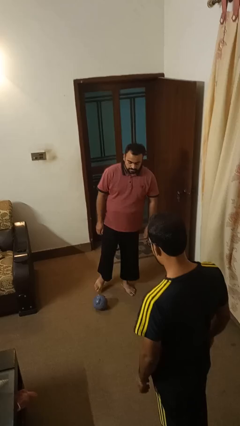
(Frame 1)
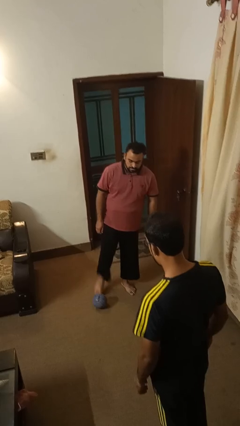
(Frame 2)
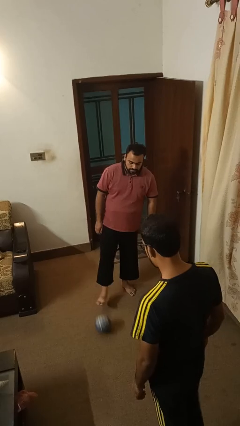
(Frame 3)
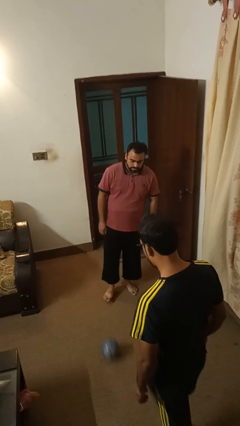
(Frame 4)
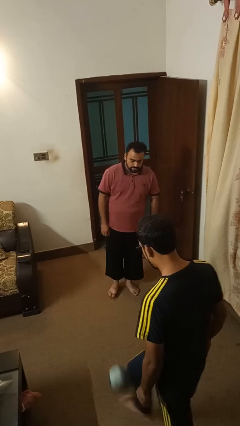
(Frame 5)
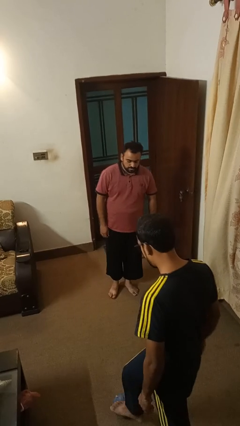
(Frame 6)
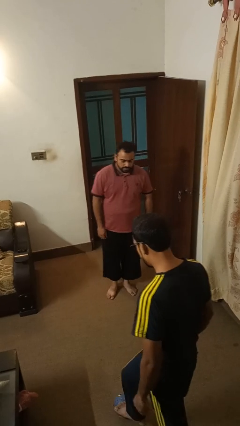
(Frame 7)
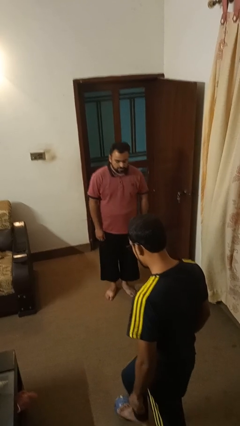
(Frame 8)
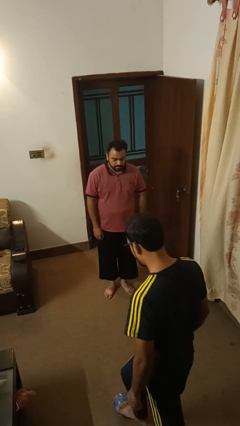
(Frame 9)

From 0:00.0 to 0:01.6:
person kicks object to person

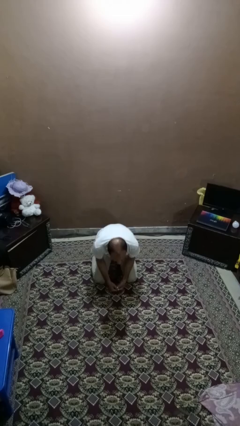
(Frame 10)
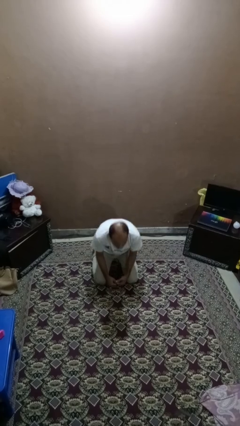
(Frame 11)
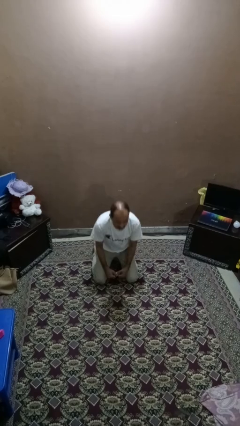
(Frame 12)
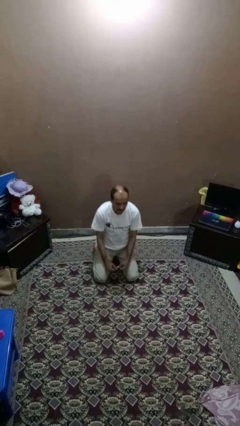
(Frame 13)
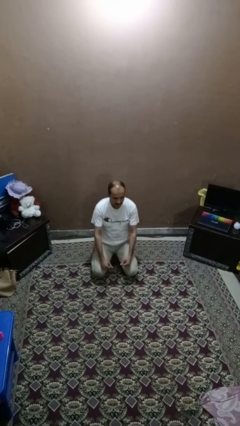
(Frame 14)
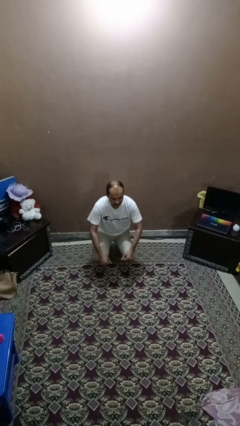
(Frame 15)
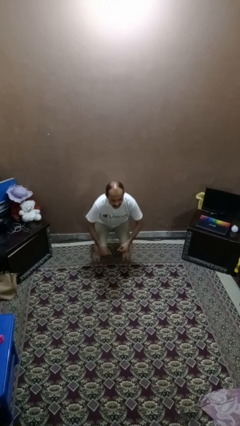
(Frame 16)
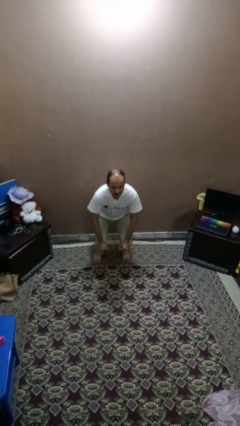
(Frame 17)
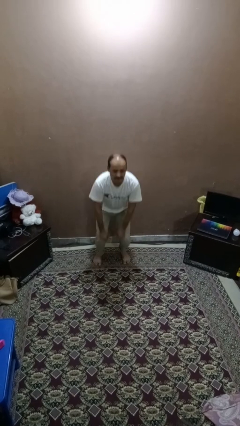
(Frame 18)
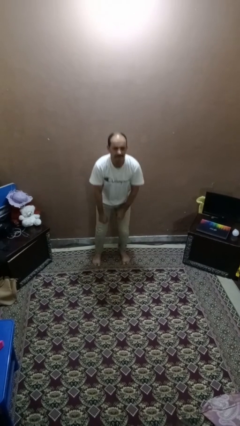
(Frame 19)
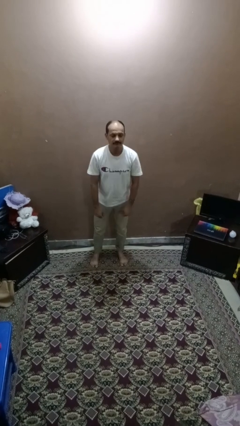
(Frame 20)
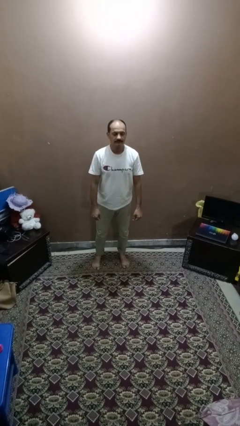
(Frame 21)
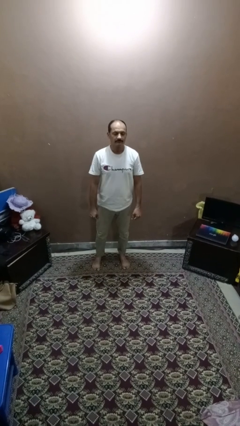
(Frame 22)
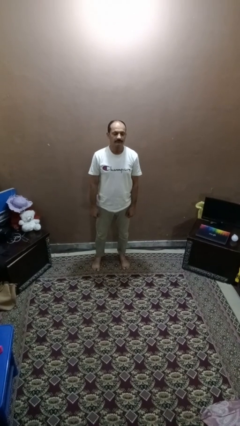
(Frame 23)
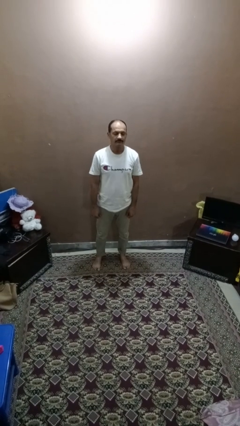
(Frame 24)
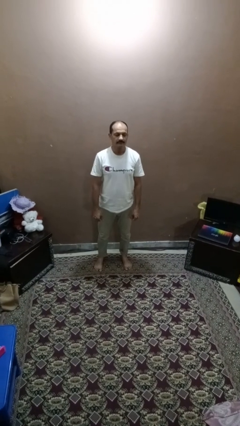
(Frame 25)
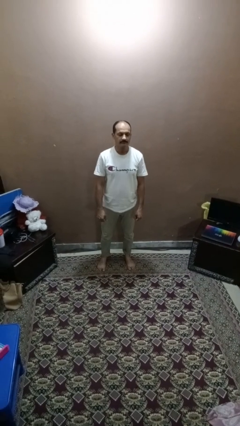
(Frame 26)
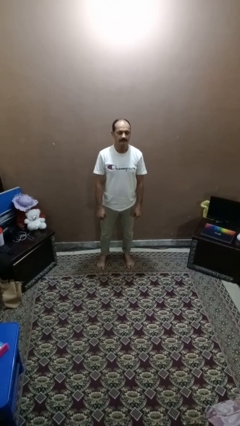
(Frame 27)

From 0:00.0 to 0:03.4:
person stands up from floor

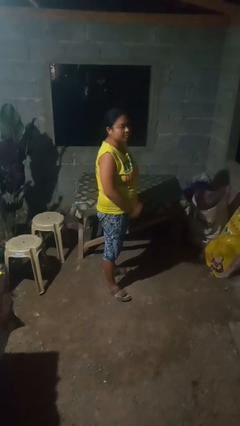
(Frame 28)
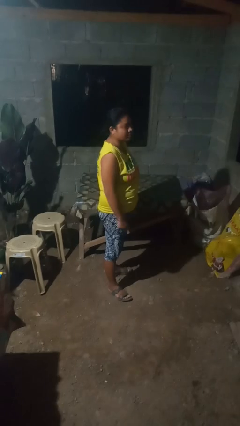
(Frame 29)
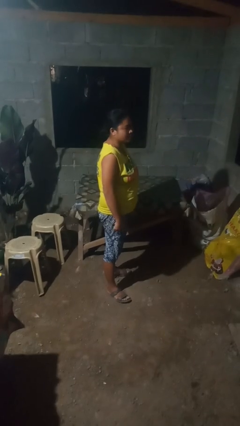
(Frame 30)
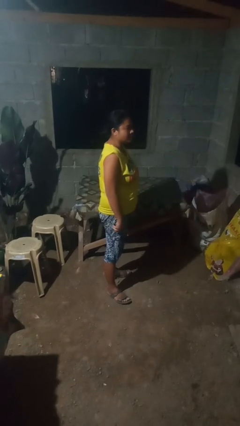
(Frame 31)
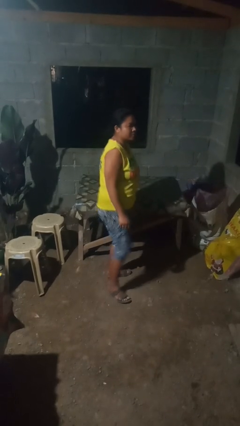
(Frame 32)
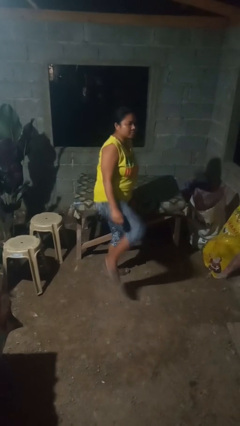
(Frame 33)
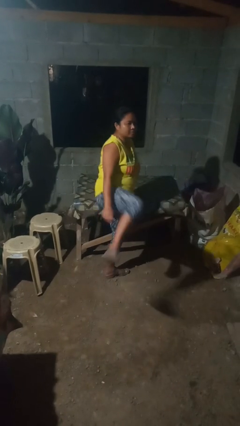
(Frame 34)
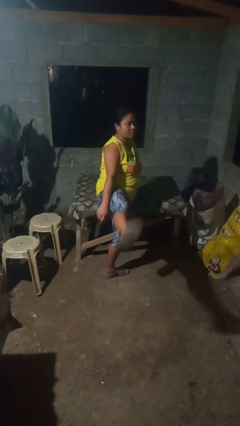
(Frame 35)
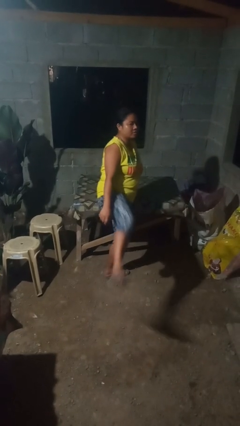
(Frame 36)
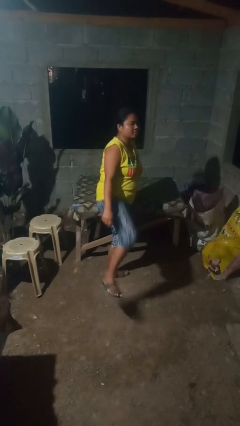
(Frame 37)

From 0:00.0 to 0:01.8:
person karate kicks

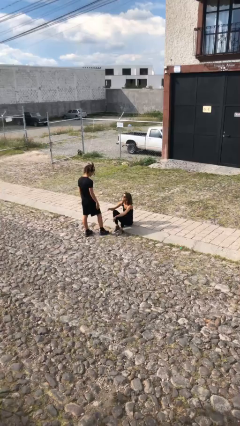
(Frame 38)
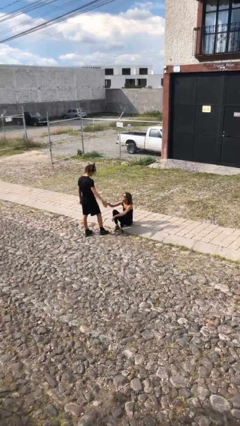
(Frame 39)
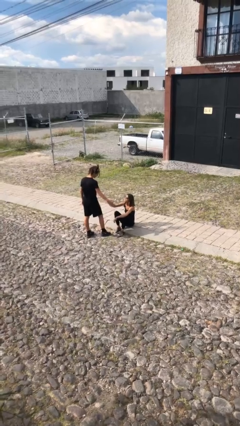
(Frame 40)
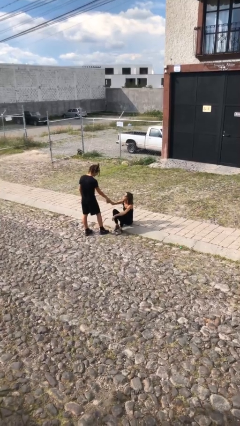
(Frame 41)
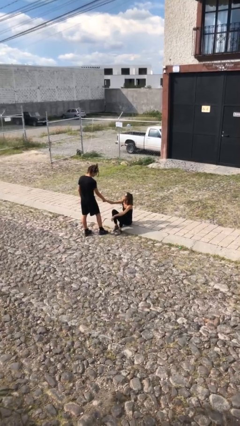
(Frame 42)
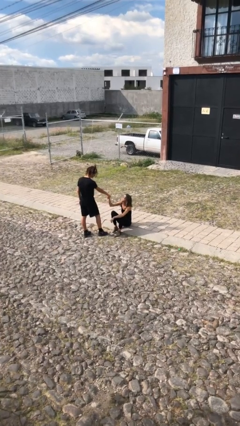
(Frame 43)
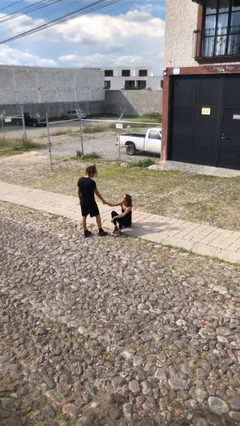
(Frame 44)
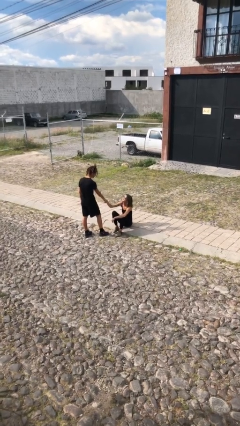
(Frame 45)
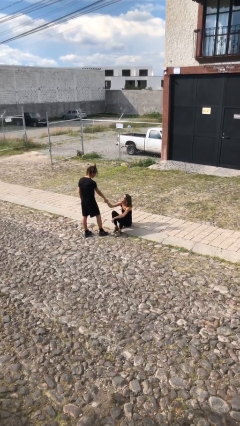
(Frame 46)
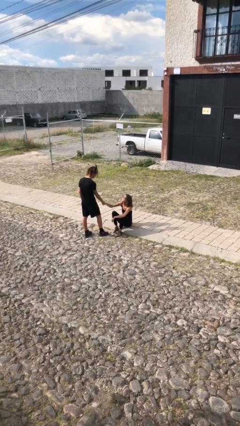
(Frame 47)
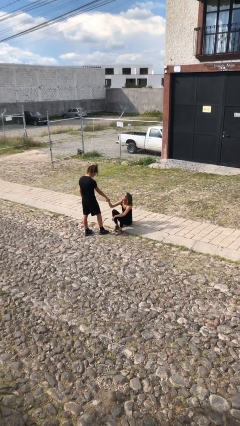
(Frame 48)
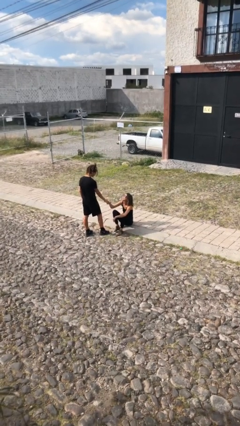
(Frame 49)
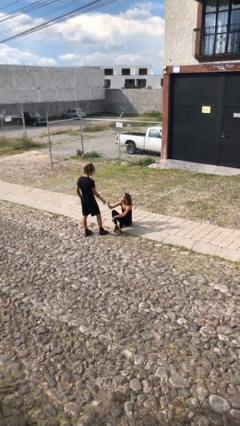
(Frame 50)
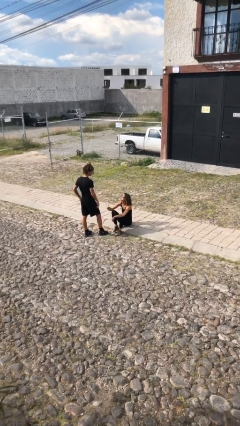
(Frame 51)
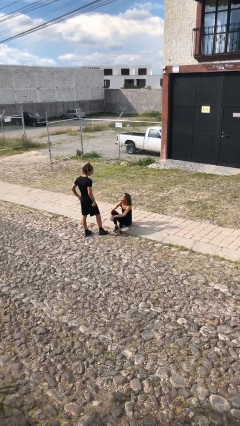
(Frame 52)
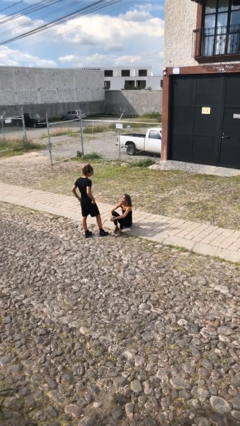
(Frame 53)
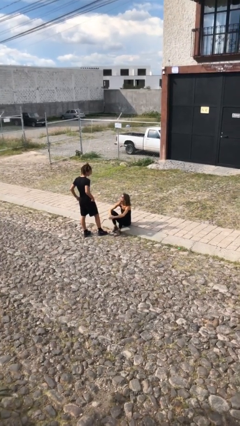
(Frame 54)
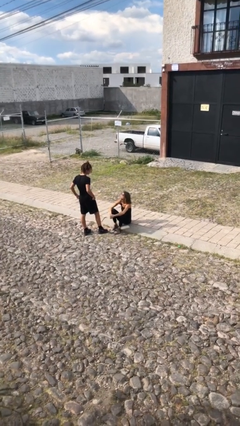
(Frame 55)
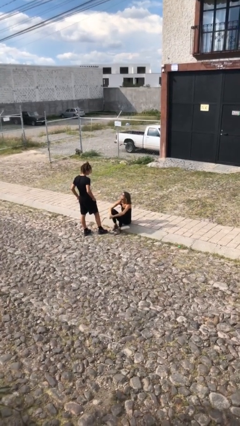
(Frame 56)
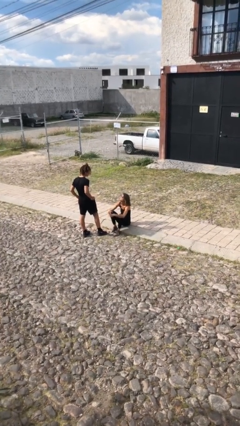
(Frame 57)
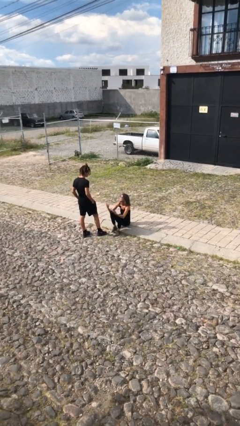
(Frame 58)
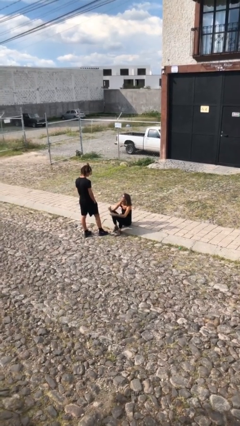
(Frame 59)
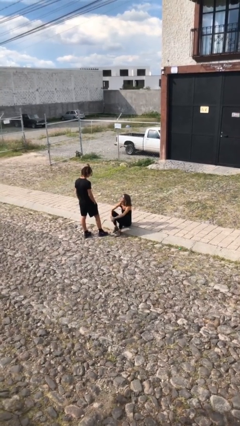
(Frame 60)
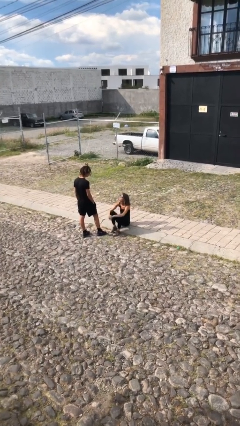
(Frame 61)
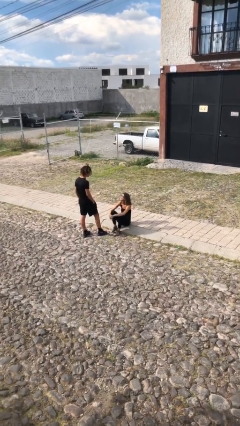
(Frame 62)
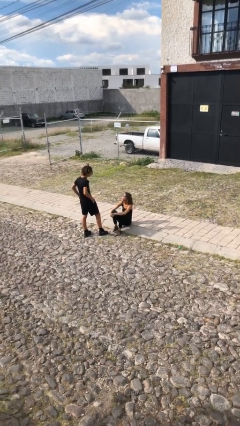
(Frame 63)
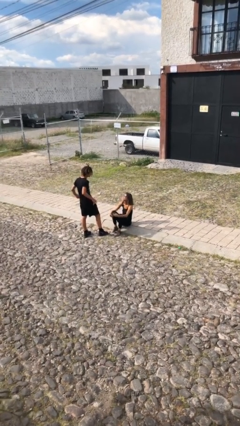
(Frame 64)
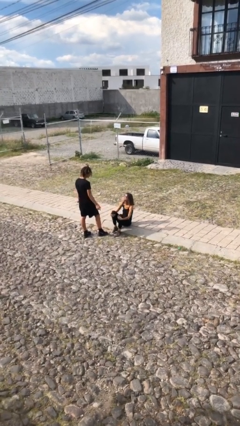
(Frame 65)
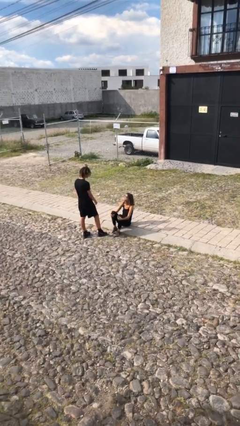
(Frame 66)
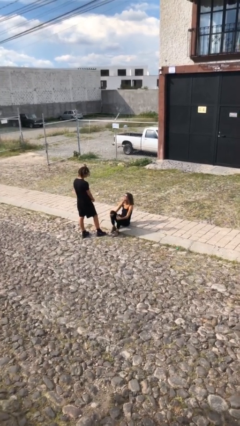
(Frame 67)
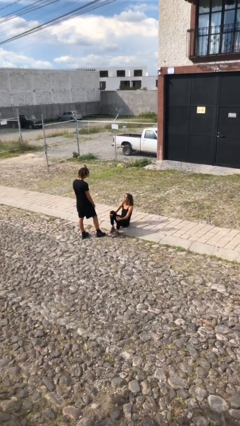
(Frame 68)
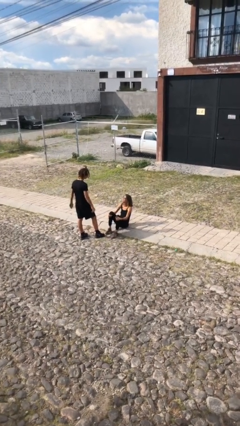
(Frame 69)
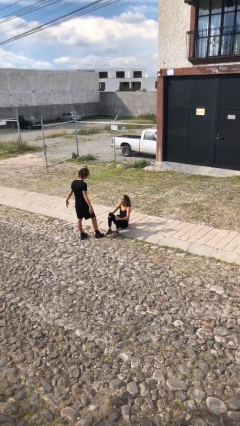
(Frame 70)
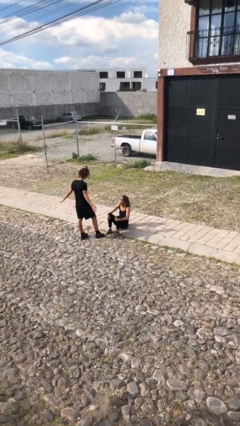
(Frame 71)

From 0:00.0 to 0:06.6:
person shakes hand

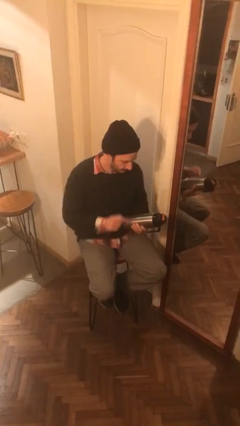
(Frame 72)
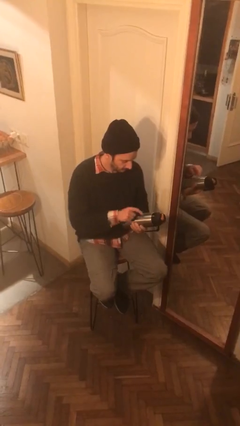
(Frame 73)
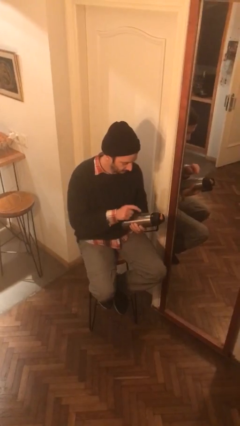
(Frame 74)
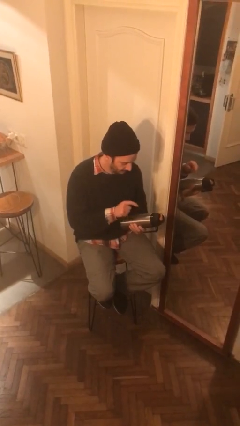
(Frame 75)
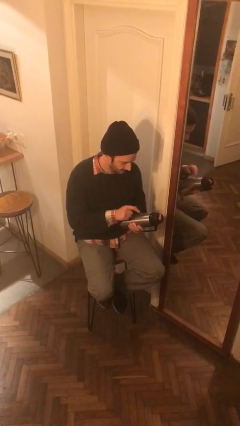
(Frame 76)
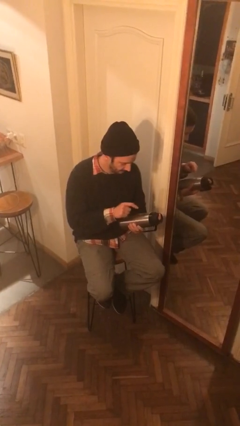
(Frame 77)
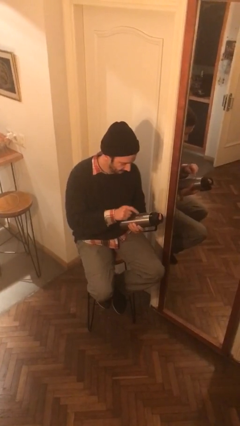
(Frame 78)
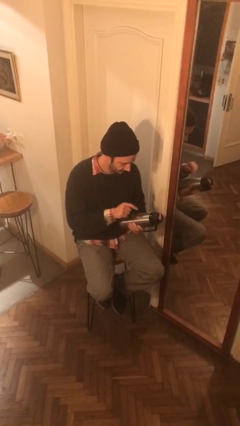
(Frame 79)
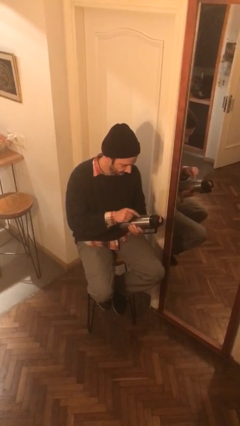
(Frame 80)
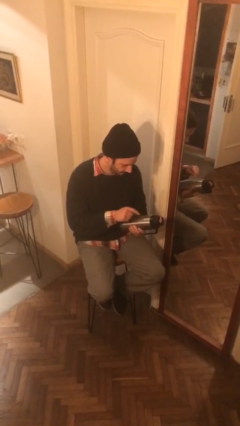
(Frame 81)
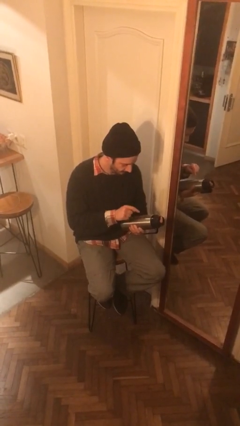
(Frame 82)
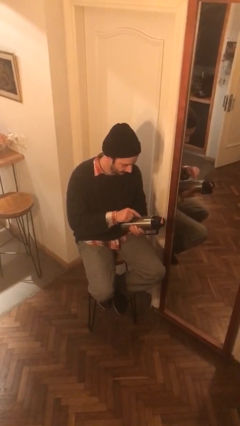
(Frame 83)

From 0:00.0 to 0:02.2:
person taps object with finger

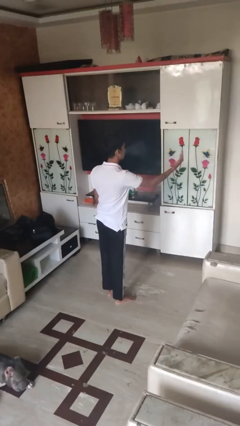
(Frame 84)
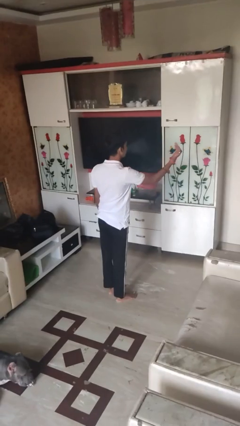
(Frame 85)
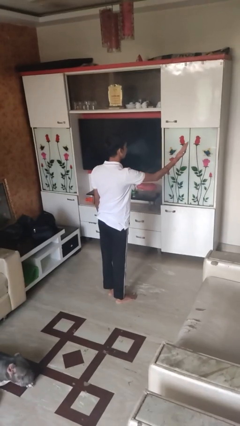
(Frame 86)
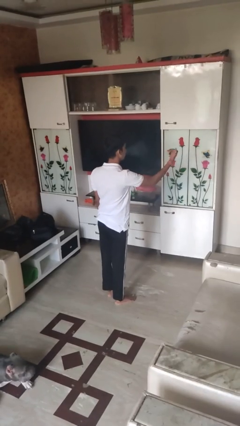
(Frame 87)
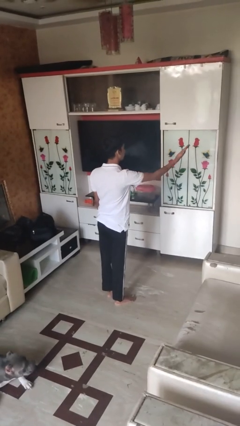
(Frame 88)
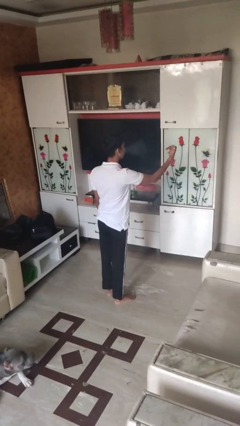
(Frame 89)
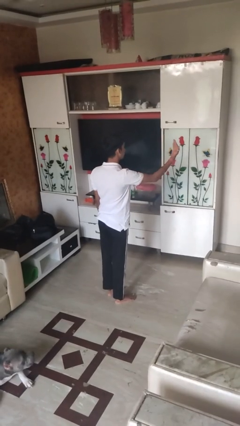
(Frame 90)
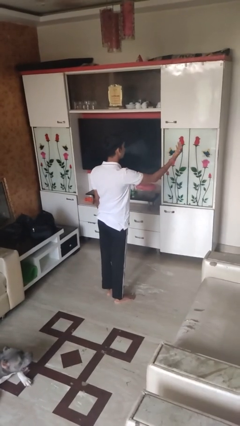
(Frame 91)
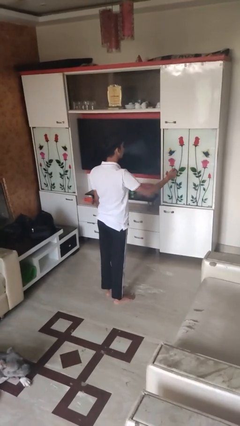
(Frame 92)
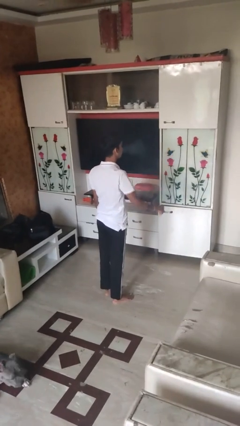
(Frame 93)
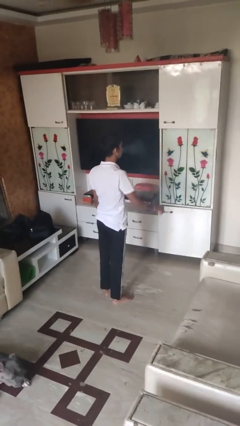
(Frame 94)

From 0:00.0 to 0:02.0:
person gestures come here
